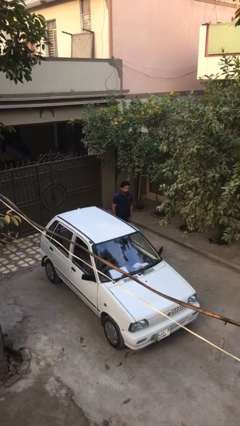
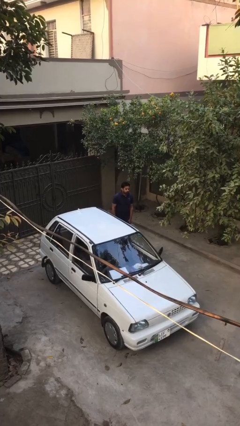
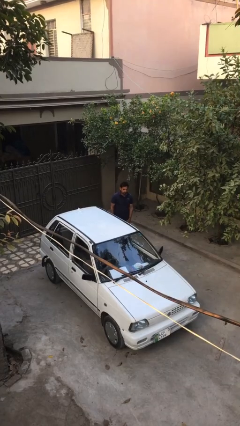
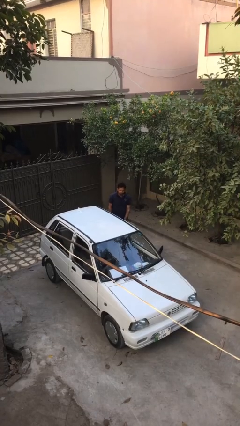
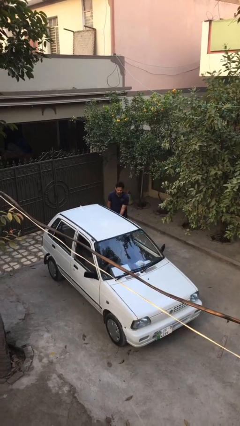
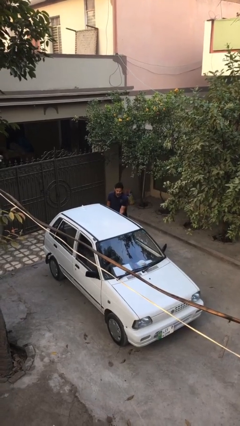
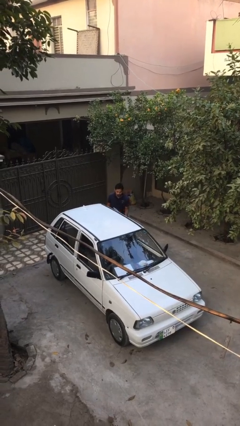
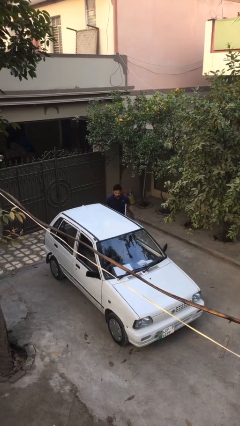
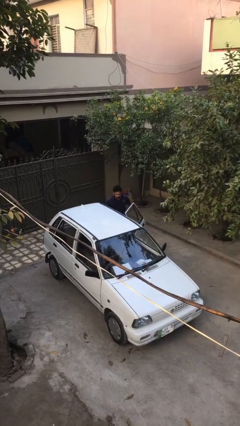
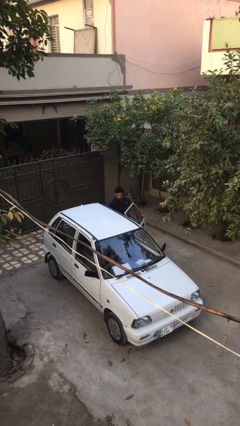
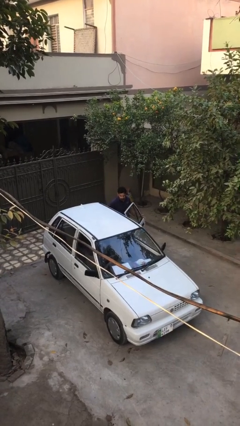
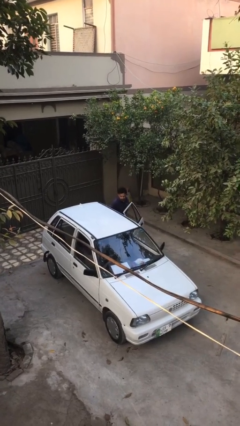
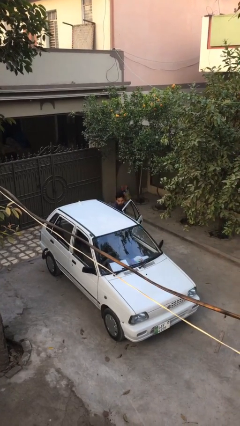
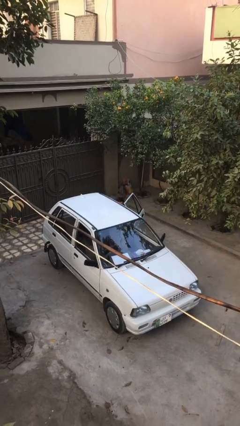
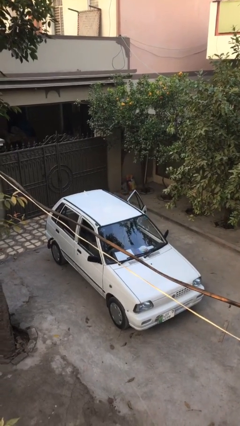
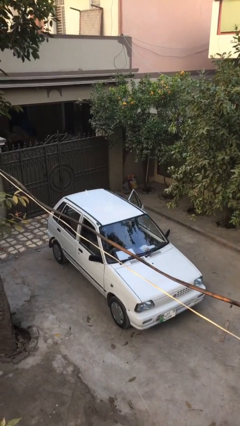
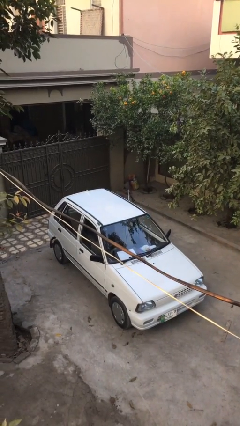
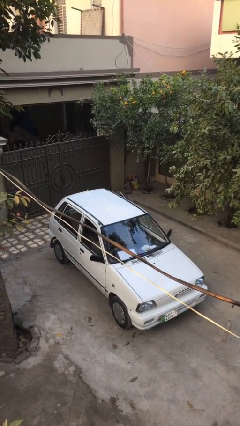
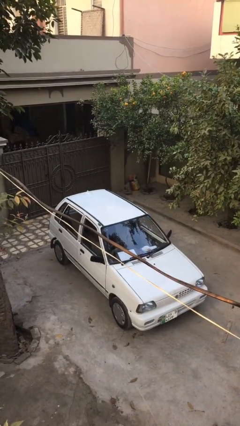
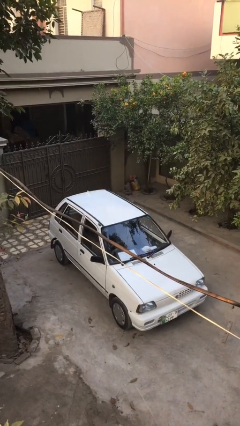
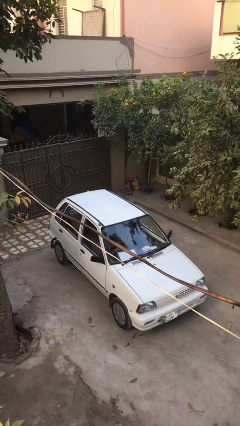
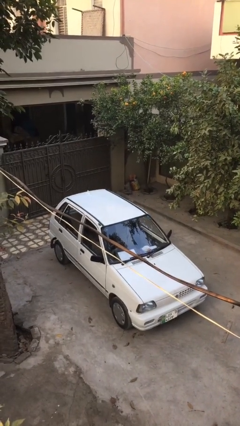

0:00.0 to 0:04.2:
person enters car

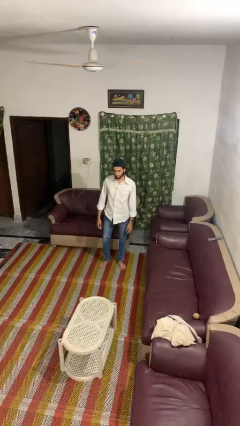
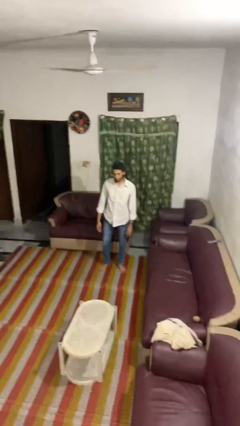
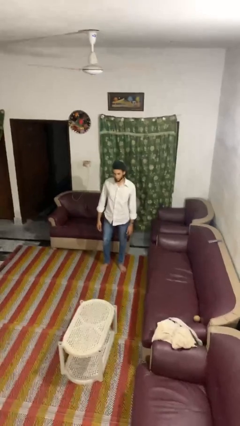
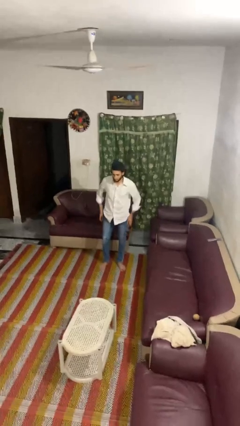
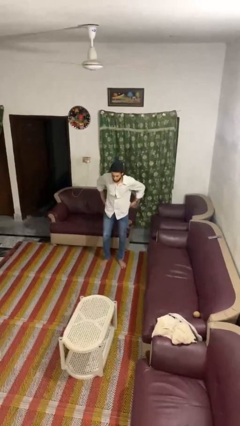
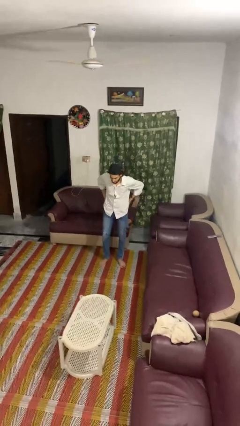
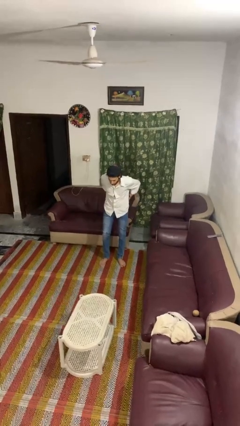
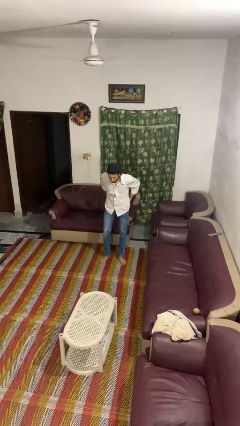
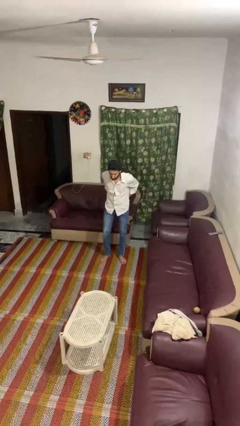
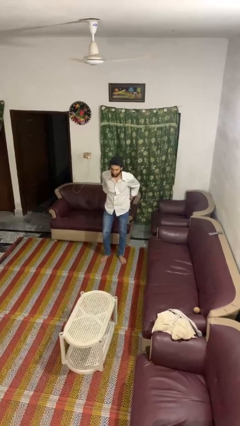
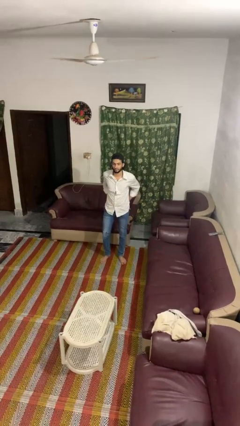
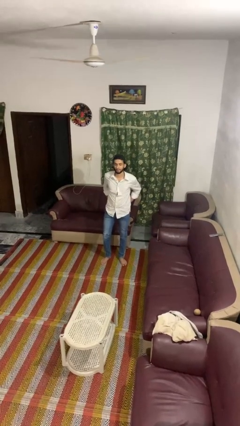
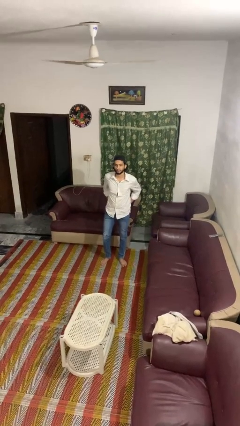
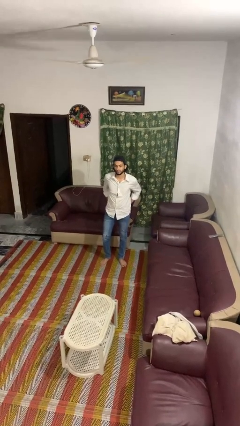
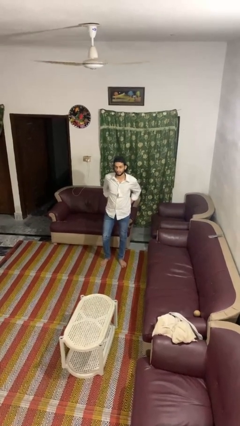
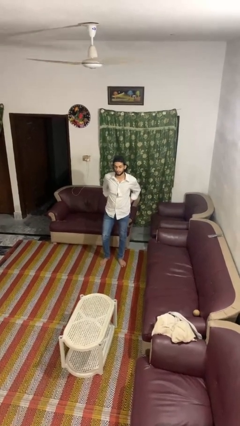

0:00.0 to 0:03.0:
person puts hands in back pockets

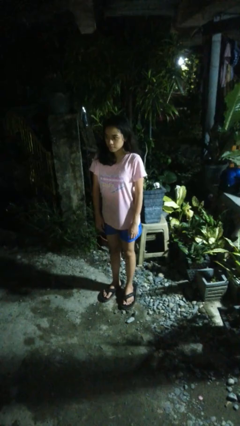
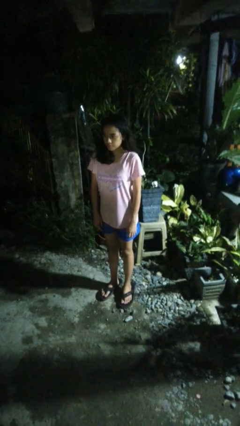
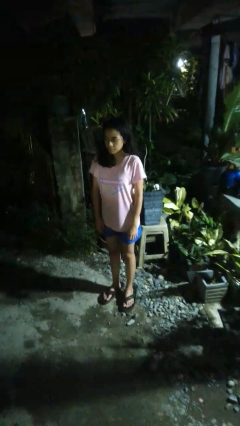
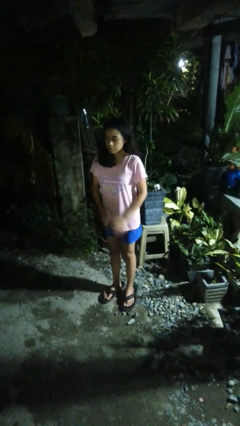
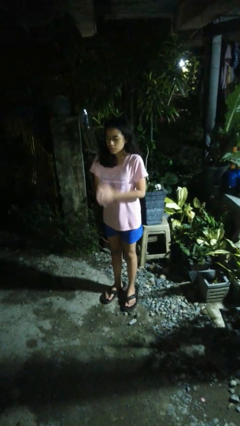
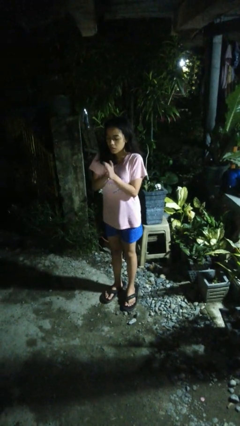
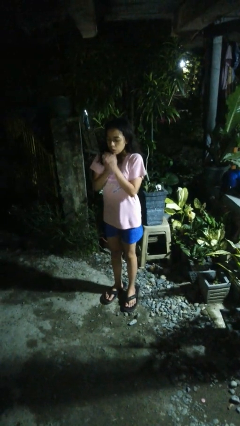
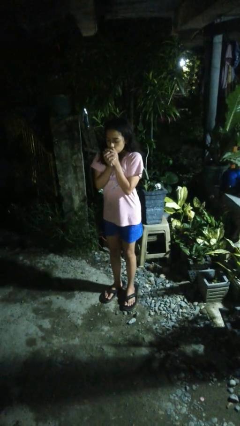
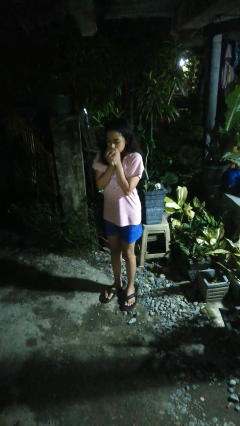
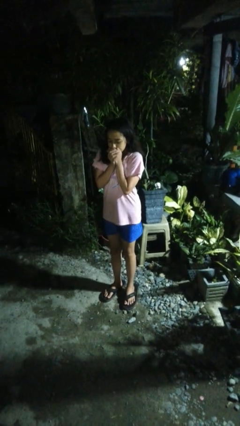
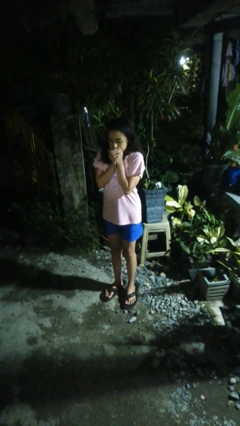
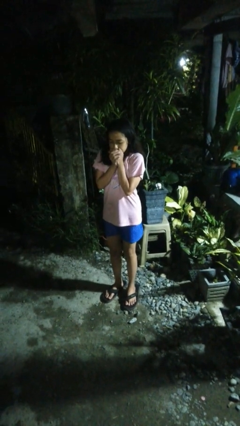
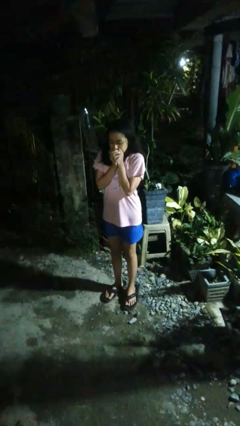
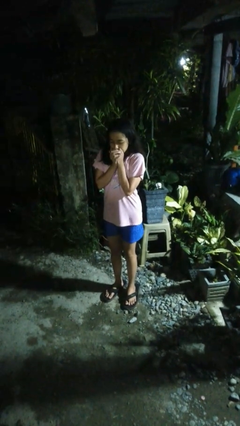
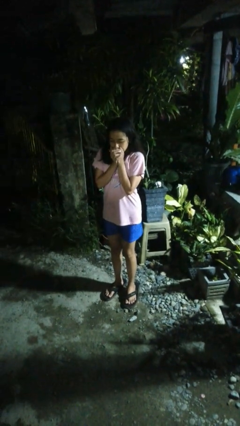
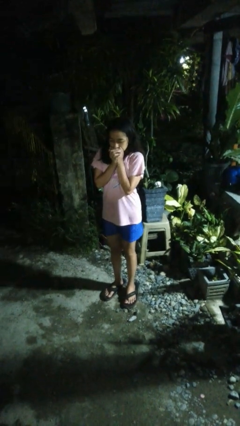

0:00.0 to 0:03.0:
person blows into hands

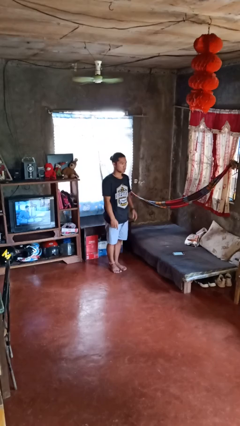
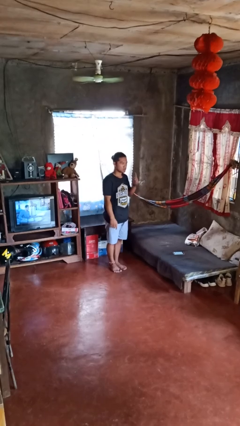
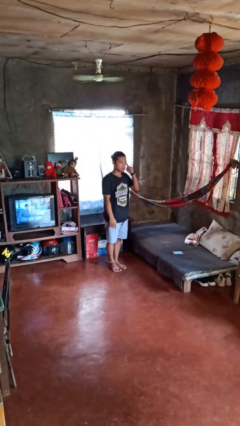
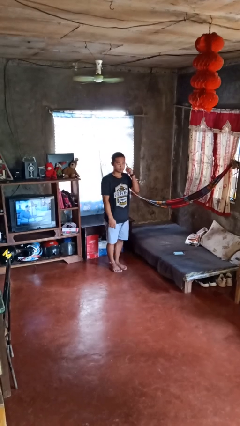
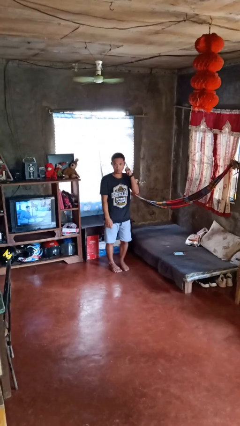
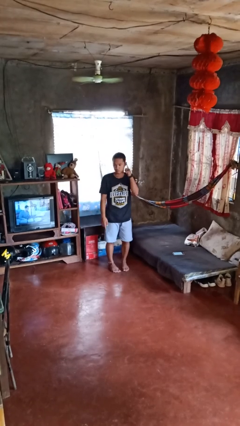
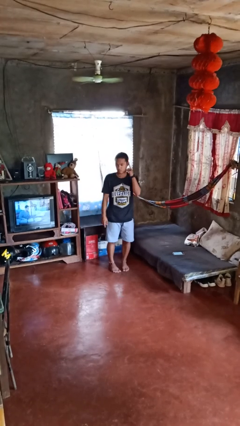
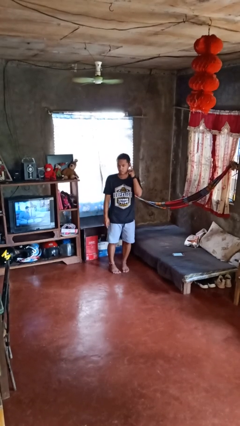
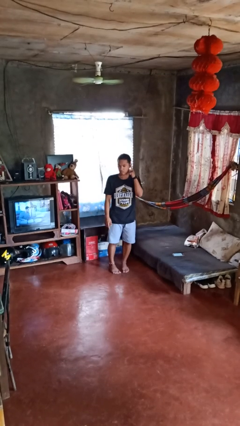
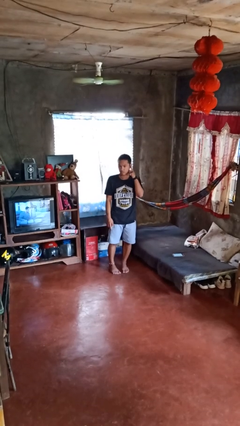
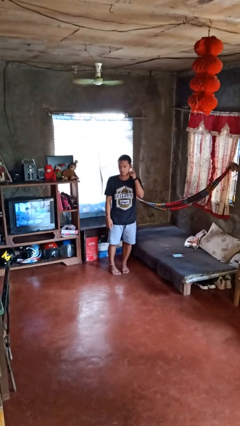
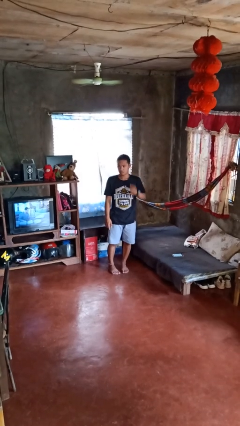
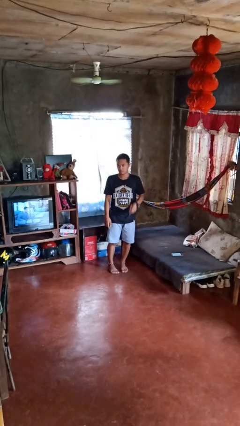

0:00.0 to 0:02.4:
person gestures listen closely

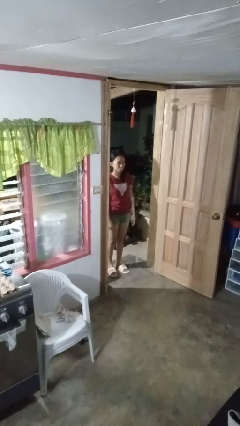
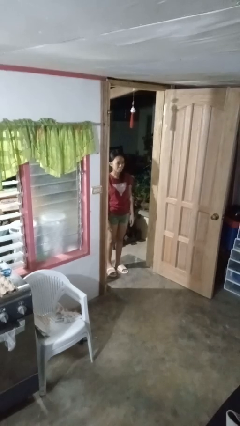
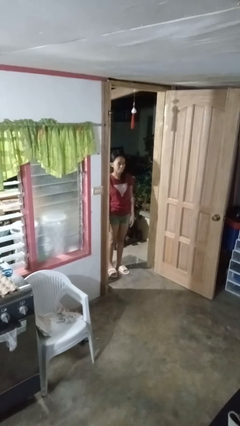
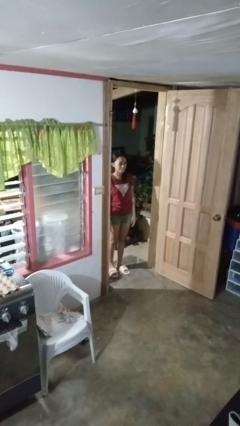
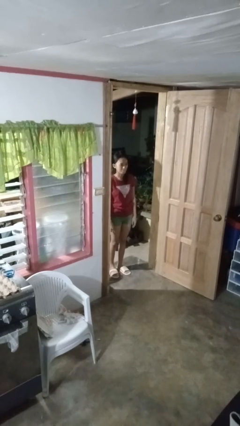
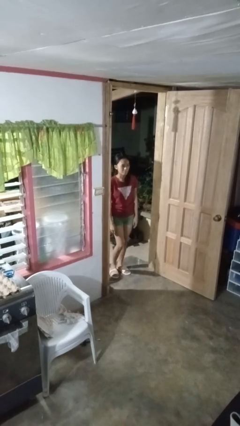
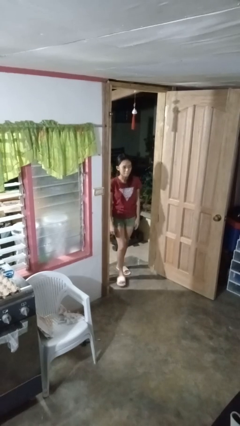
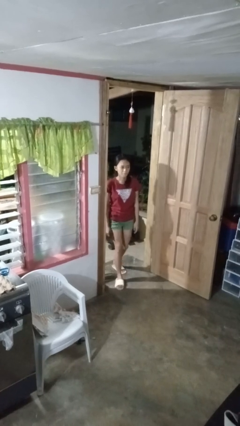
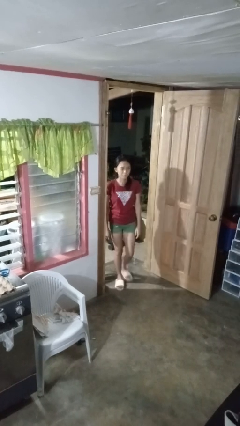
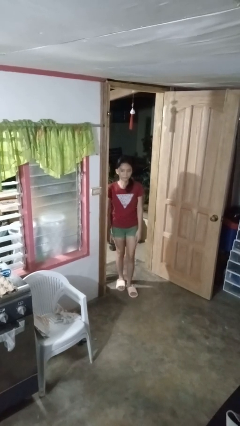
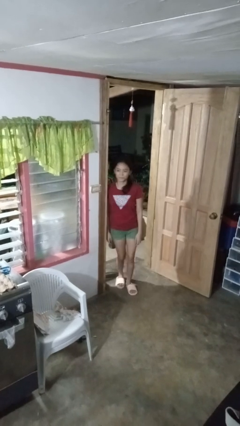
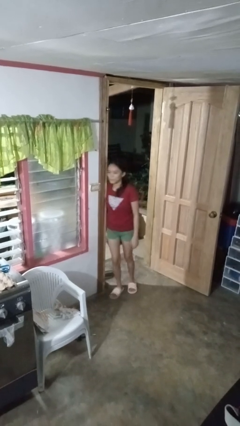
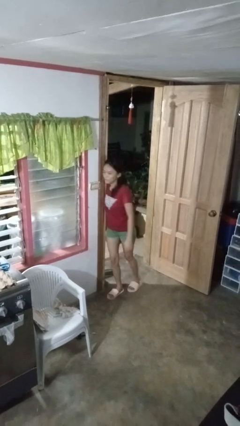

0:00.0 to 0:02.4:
person bumps into wall

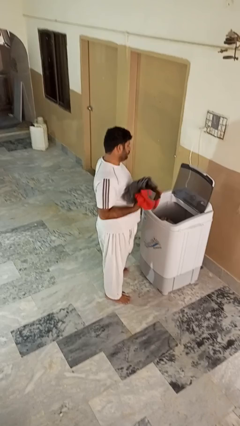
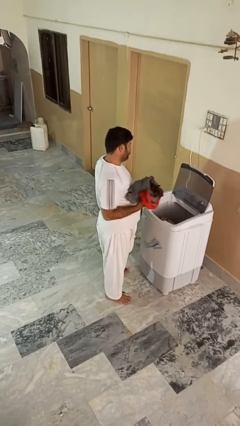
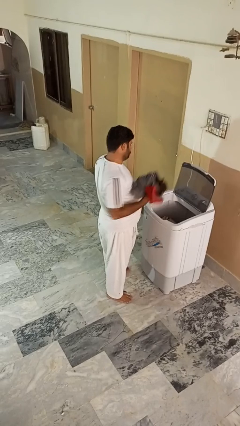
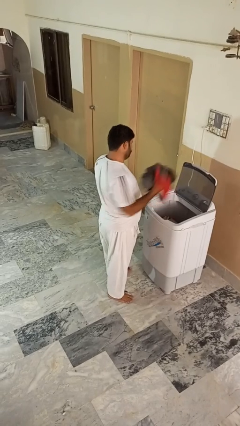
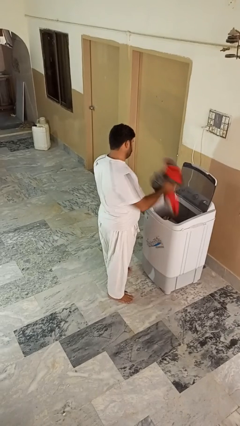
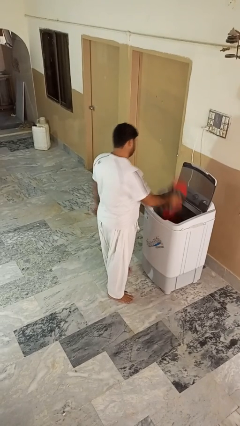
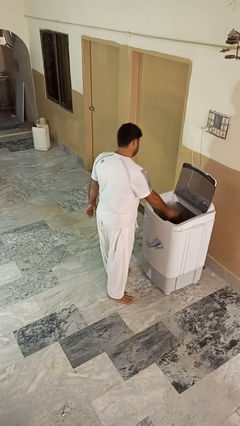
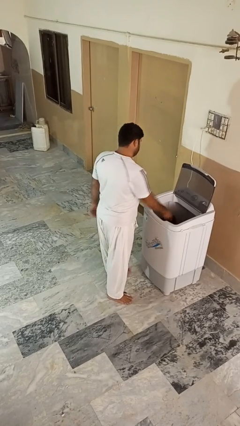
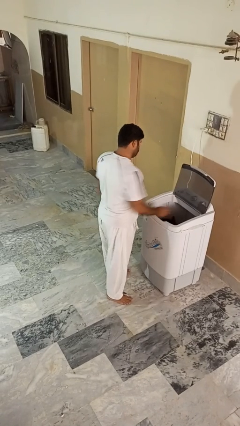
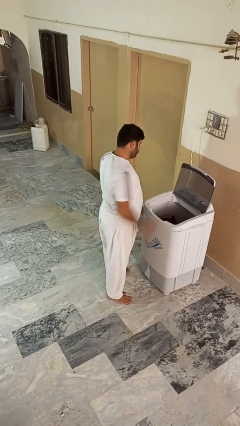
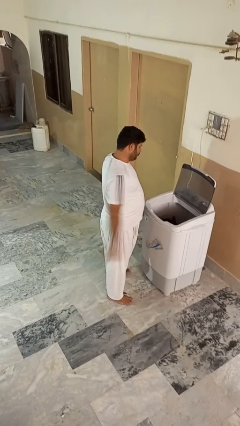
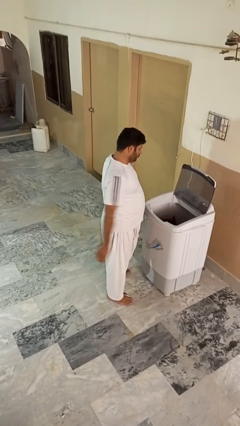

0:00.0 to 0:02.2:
person loads clotheswasher

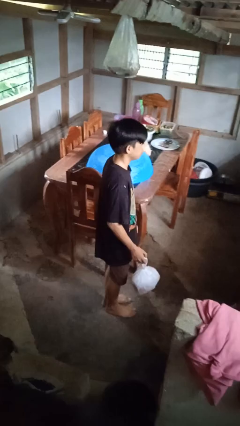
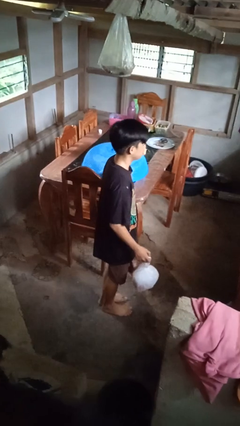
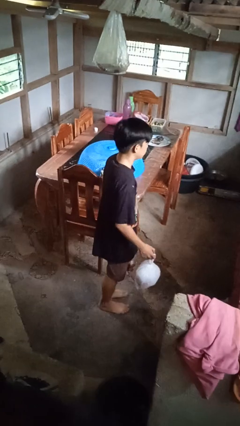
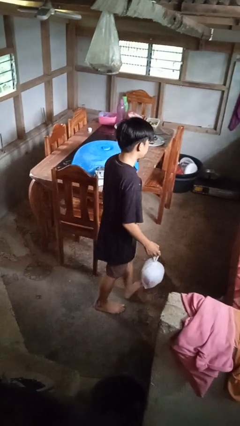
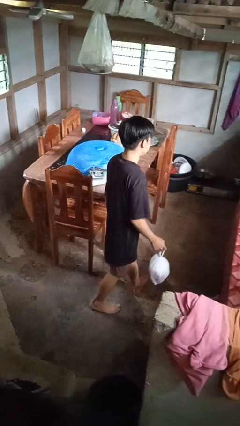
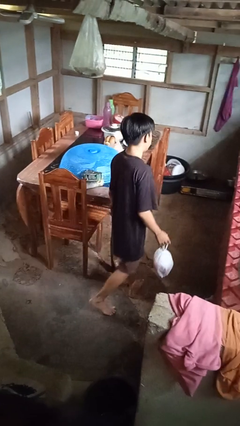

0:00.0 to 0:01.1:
person carries groceries
